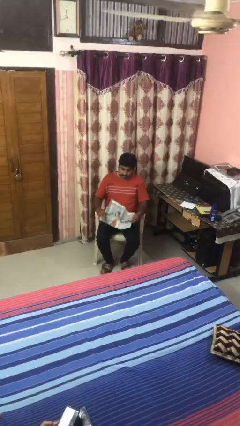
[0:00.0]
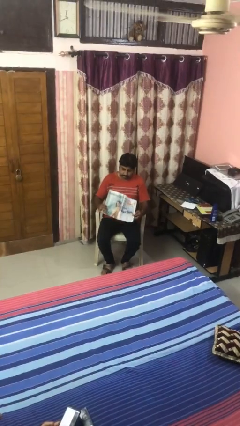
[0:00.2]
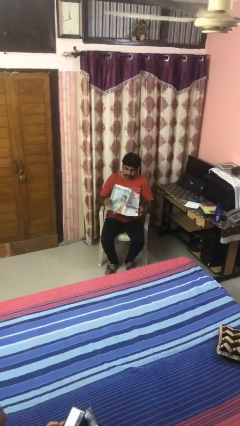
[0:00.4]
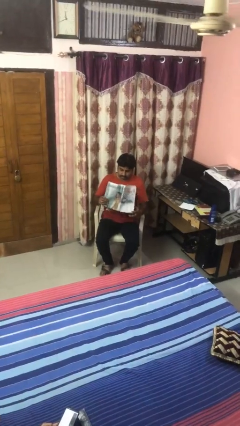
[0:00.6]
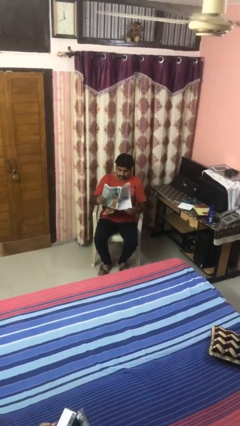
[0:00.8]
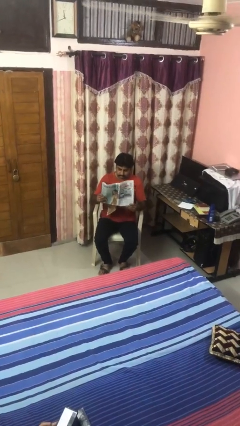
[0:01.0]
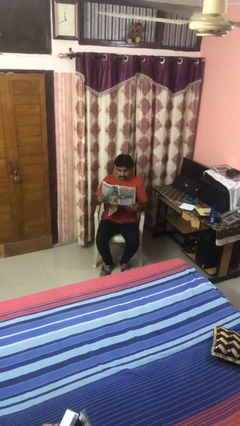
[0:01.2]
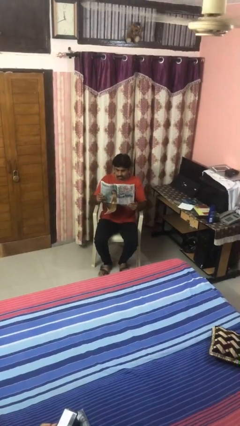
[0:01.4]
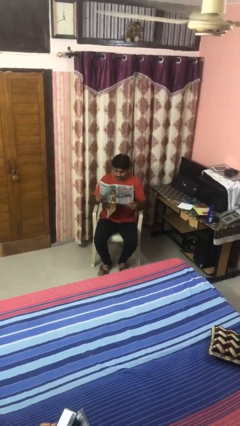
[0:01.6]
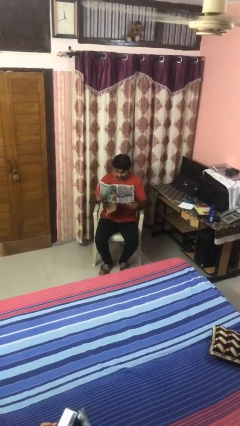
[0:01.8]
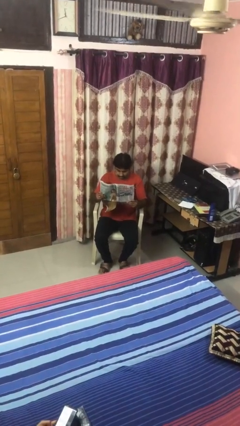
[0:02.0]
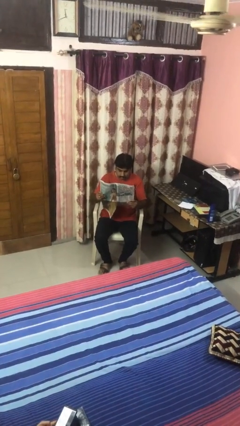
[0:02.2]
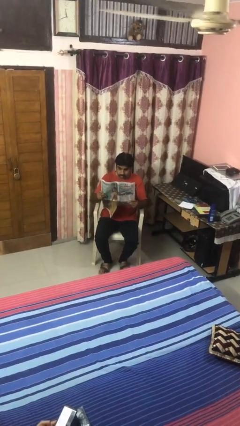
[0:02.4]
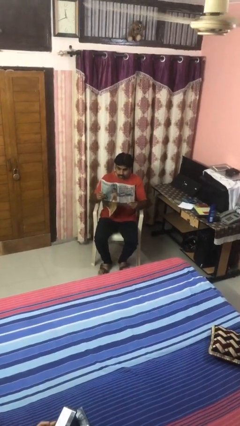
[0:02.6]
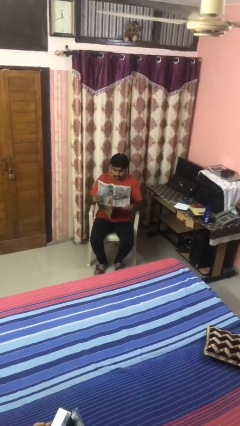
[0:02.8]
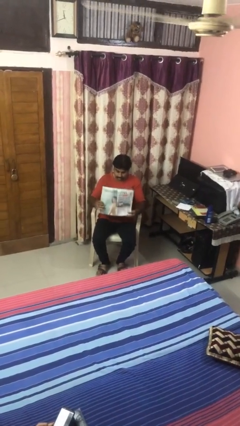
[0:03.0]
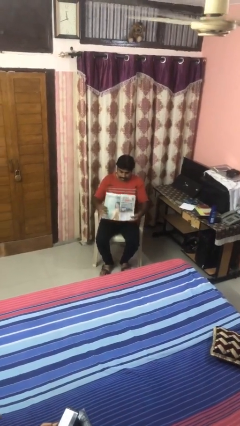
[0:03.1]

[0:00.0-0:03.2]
person reads newspaper

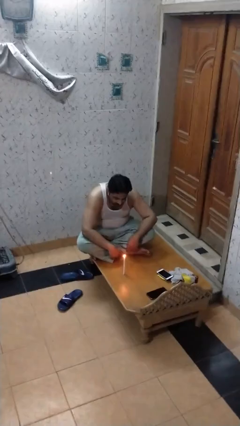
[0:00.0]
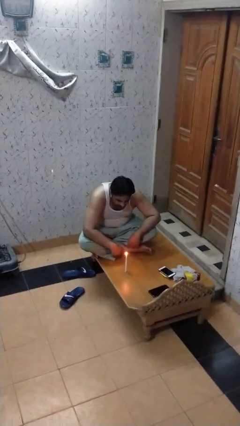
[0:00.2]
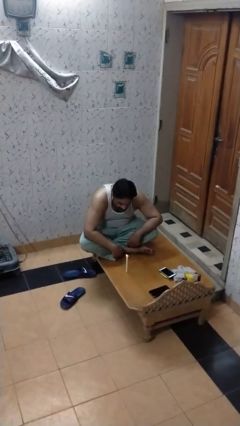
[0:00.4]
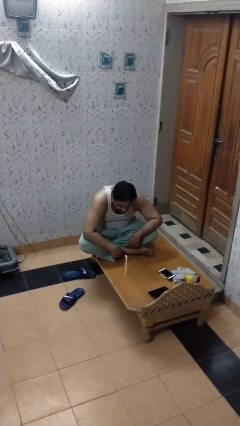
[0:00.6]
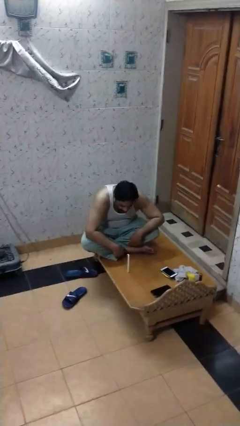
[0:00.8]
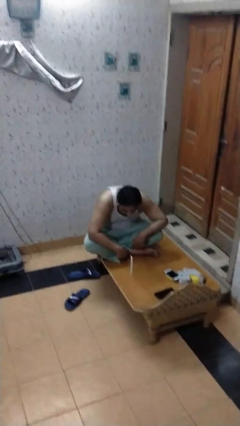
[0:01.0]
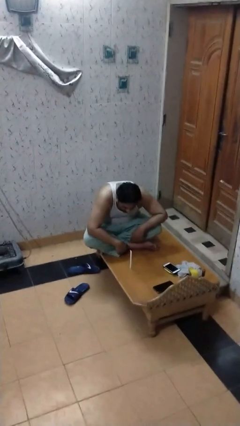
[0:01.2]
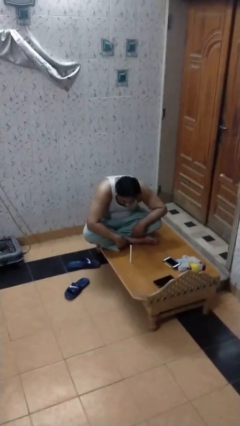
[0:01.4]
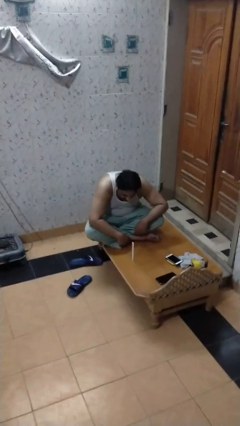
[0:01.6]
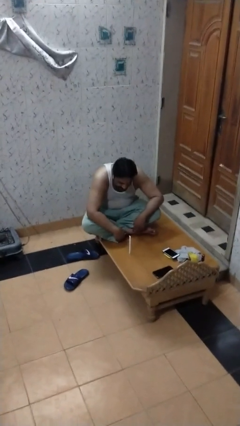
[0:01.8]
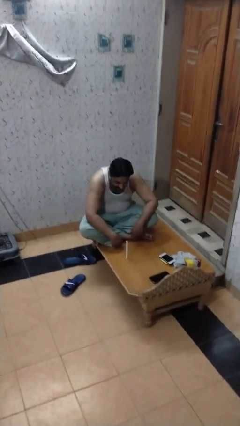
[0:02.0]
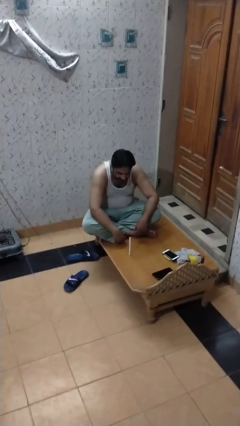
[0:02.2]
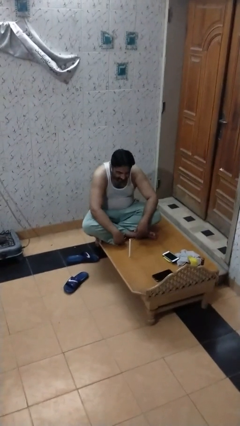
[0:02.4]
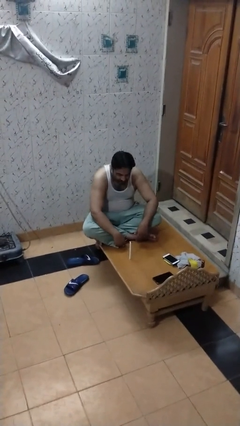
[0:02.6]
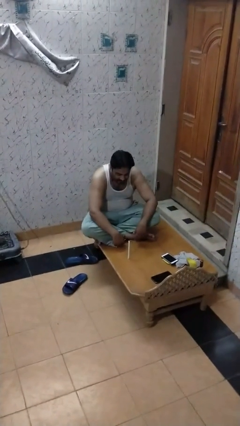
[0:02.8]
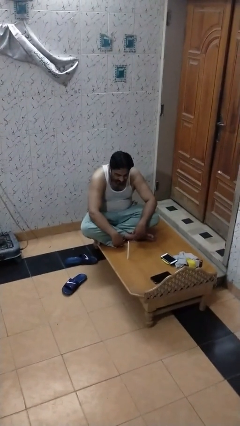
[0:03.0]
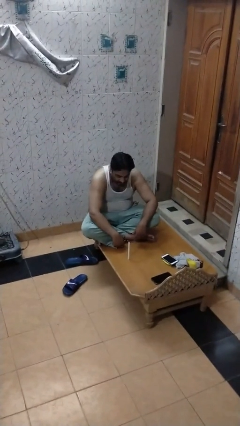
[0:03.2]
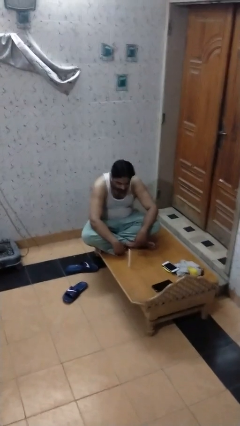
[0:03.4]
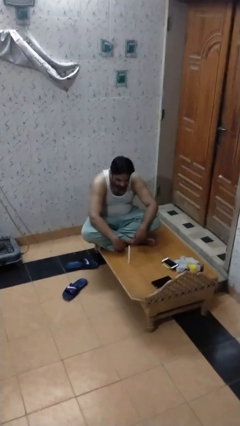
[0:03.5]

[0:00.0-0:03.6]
person extinguishes candle

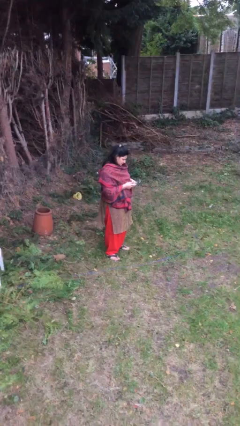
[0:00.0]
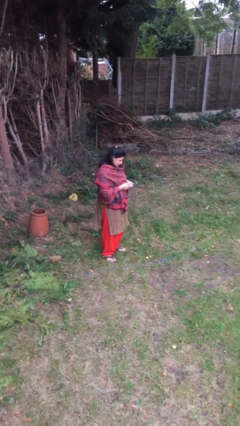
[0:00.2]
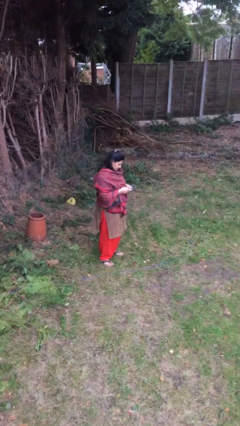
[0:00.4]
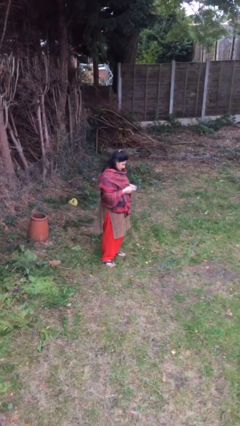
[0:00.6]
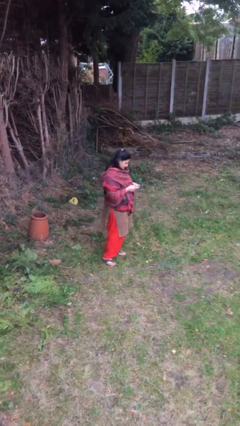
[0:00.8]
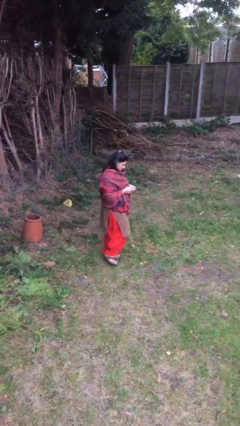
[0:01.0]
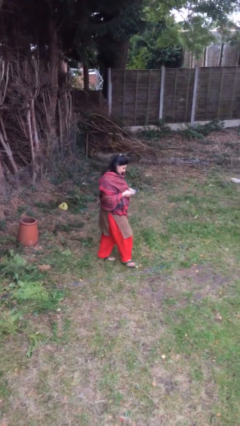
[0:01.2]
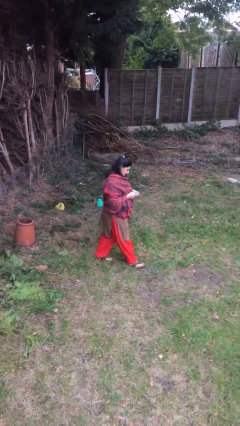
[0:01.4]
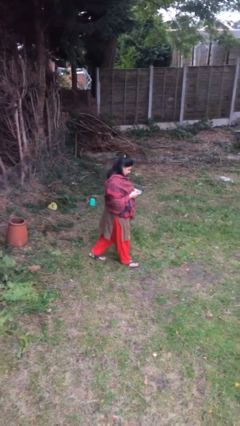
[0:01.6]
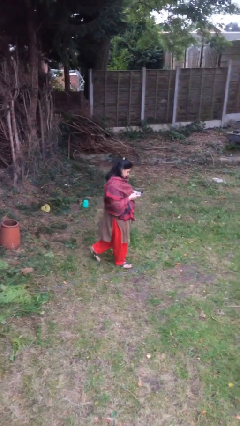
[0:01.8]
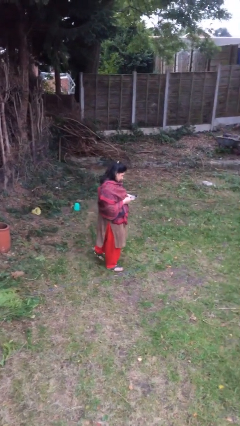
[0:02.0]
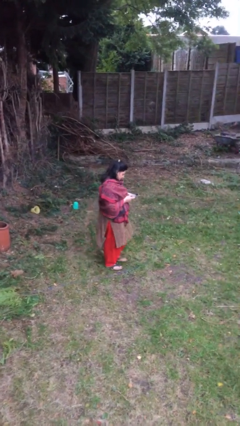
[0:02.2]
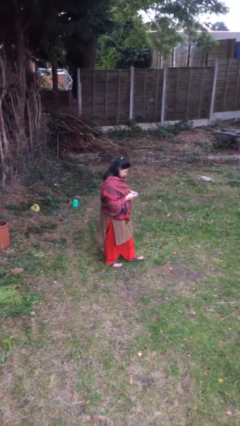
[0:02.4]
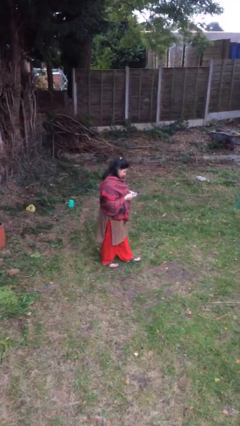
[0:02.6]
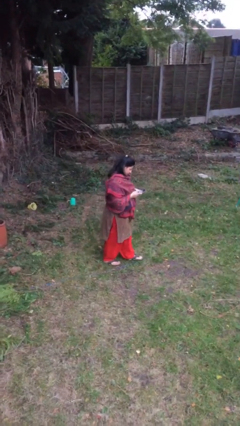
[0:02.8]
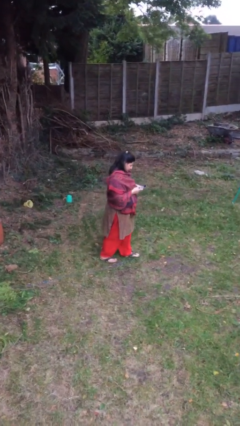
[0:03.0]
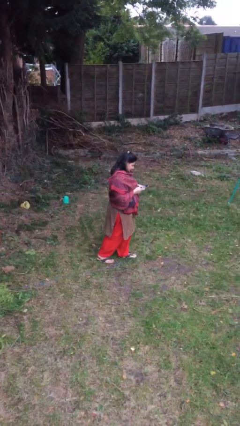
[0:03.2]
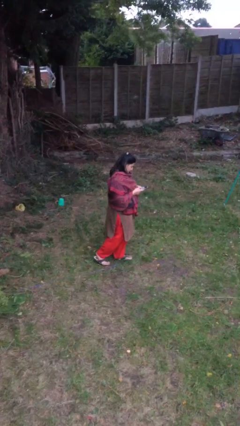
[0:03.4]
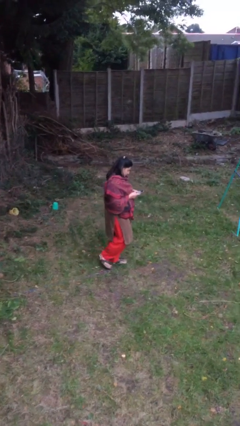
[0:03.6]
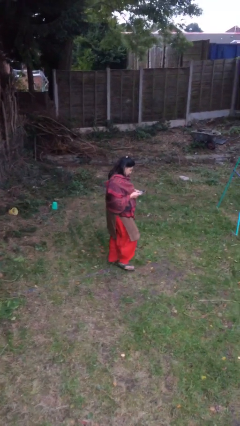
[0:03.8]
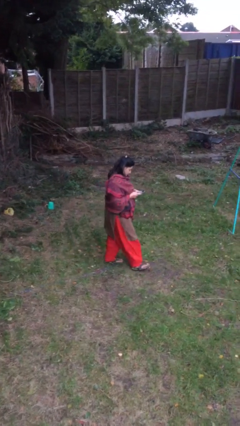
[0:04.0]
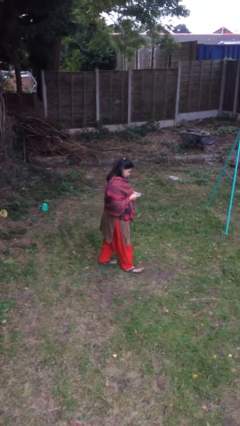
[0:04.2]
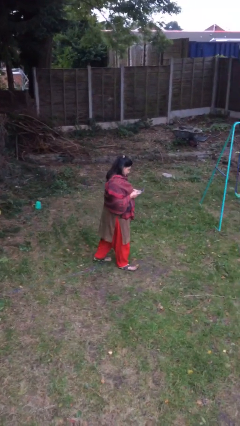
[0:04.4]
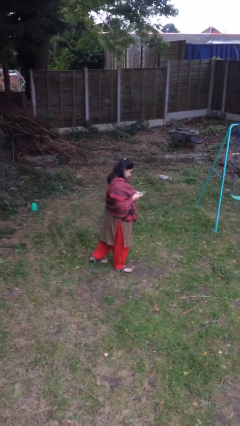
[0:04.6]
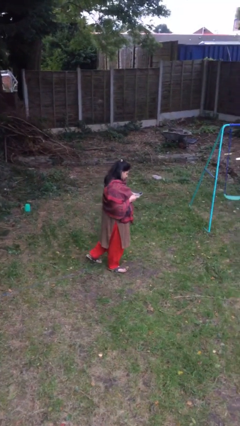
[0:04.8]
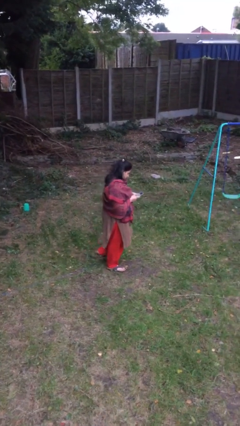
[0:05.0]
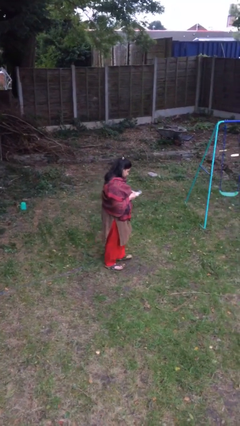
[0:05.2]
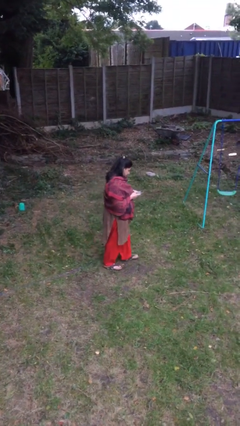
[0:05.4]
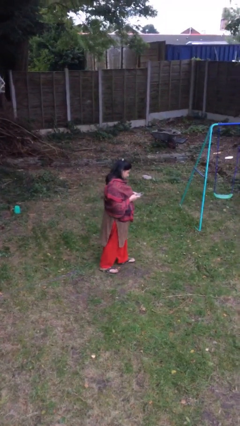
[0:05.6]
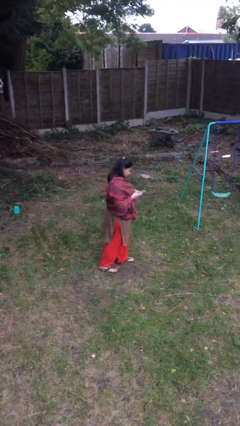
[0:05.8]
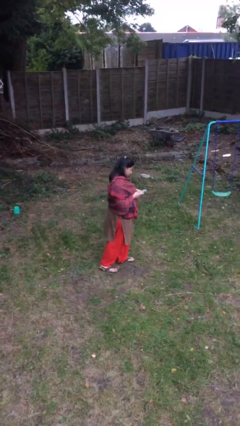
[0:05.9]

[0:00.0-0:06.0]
person texts on phone

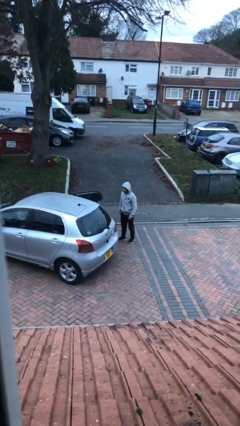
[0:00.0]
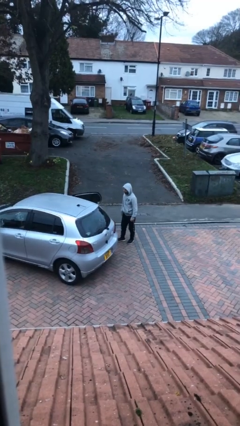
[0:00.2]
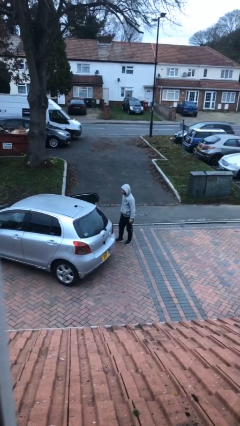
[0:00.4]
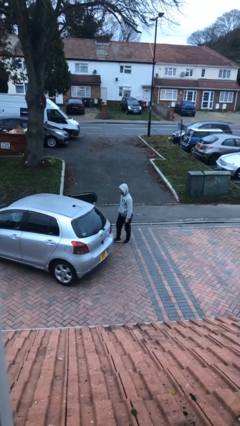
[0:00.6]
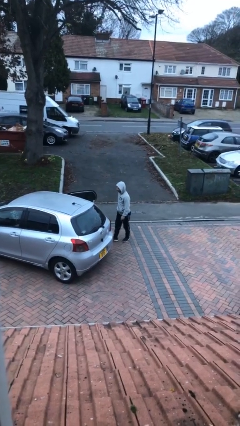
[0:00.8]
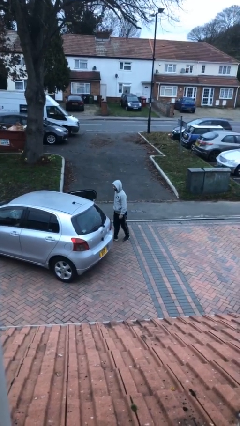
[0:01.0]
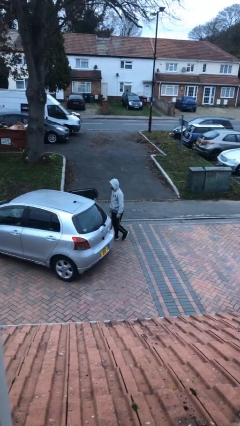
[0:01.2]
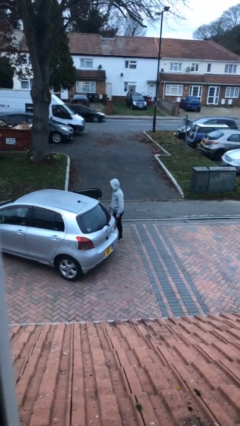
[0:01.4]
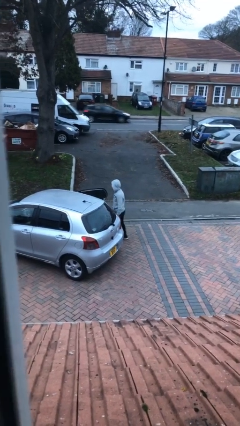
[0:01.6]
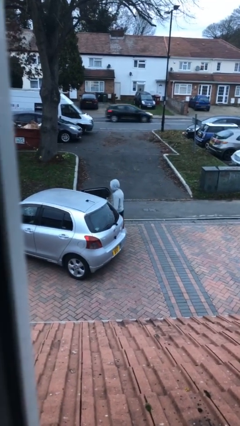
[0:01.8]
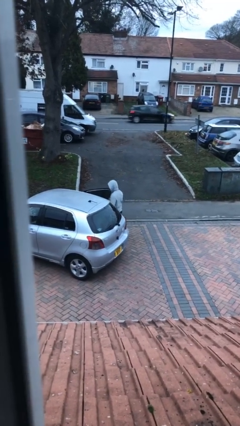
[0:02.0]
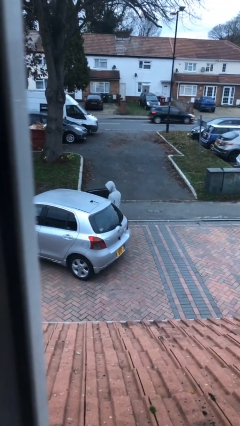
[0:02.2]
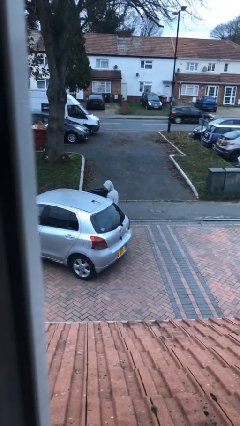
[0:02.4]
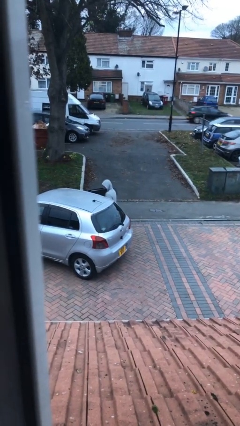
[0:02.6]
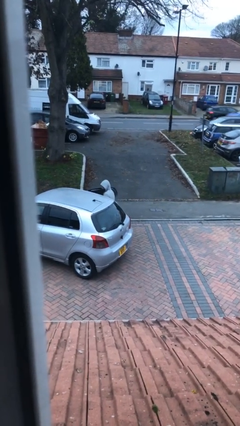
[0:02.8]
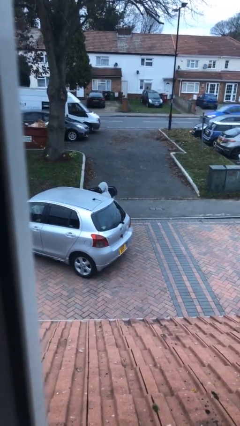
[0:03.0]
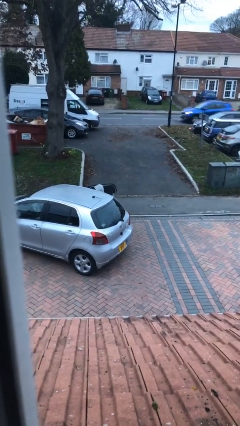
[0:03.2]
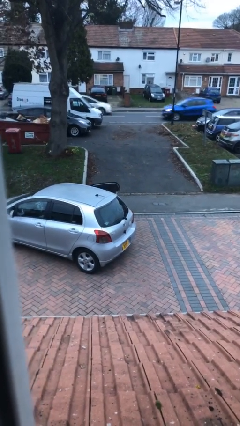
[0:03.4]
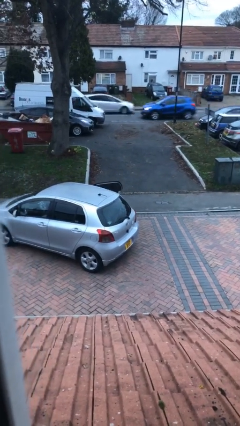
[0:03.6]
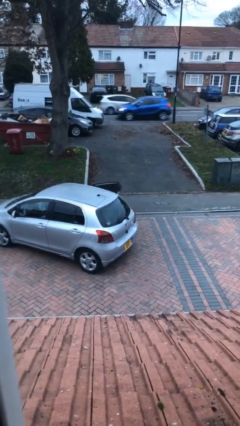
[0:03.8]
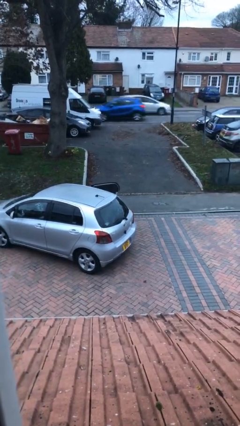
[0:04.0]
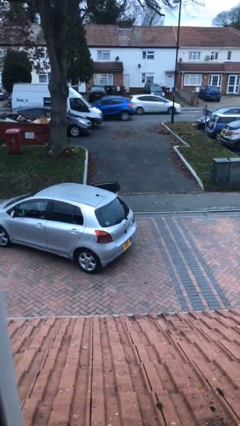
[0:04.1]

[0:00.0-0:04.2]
person enters car

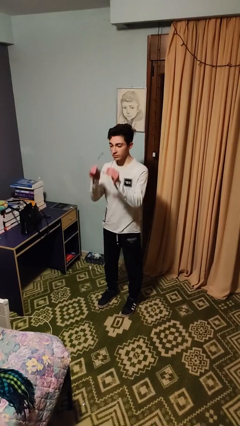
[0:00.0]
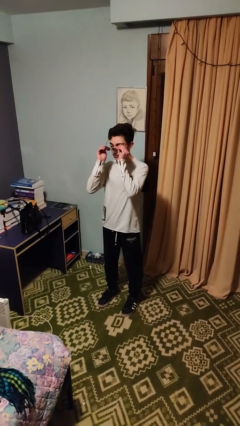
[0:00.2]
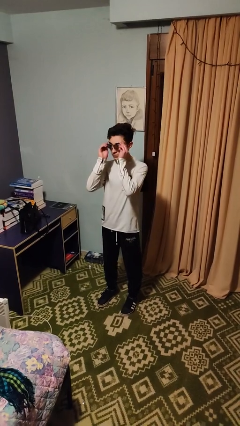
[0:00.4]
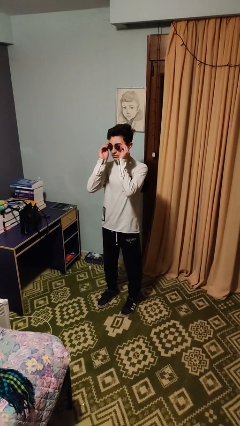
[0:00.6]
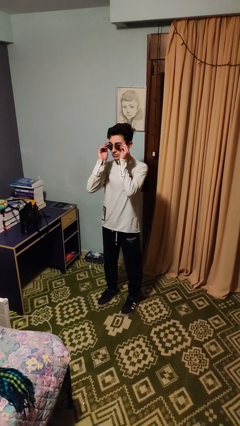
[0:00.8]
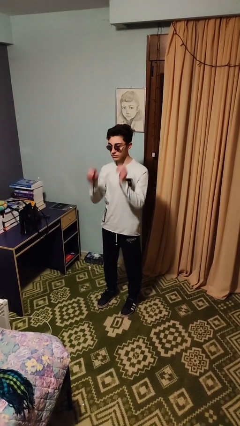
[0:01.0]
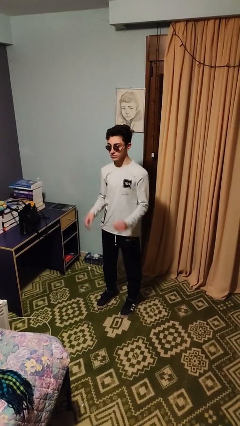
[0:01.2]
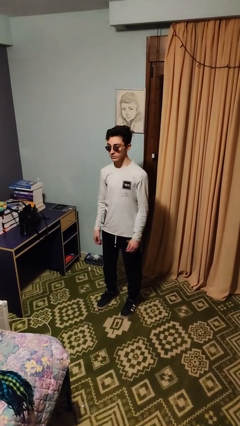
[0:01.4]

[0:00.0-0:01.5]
person puts on sunglasses
